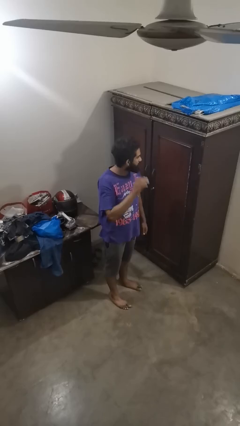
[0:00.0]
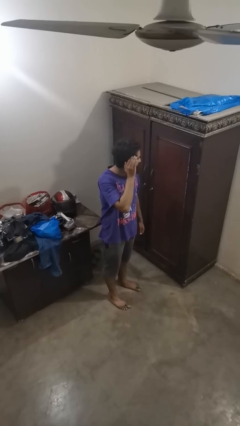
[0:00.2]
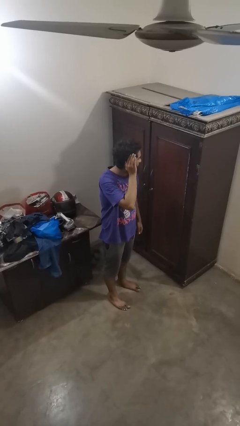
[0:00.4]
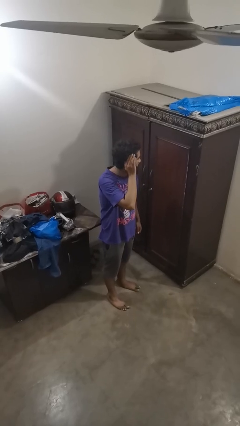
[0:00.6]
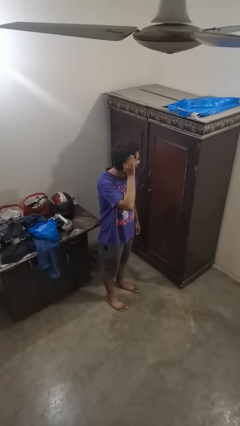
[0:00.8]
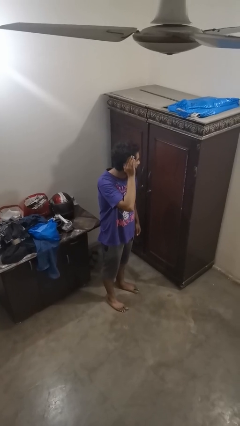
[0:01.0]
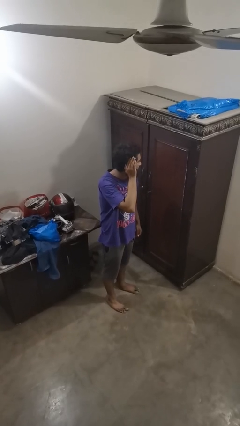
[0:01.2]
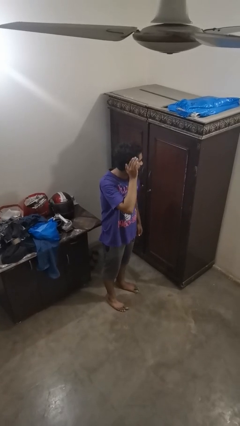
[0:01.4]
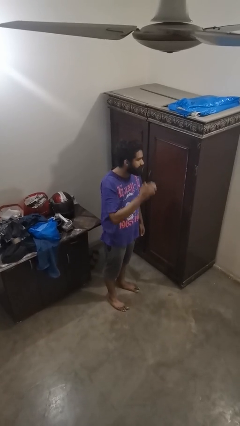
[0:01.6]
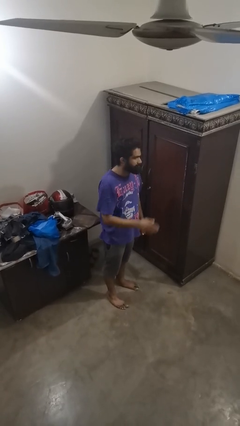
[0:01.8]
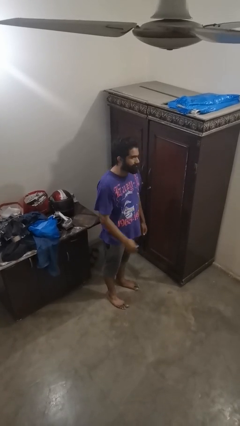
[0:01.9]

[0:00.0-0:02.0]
person gestures listen closely

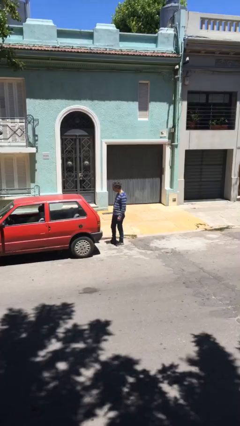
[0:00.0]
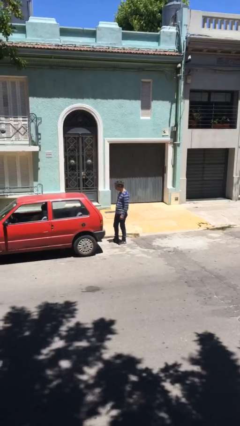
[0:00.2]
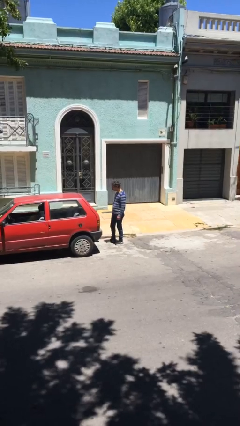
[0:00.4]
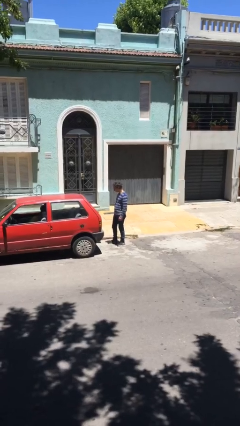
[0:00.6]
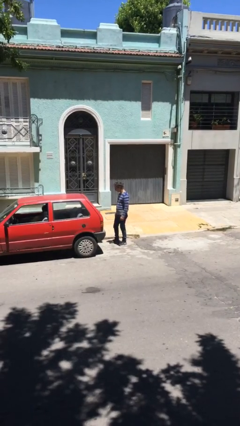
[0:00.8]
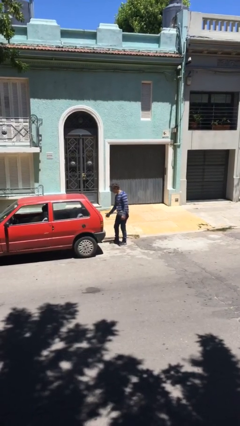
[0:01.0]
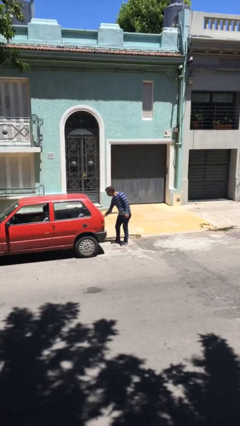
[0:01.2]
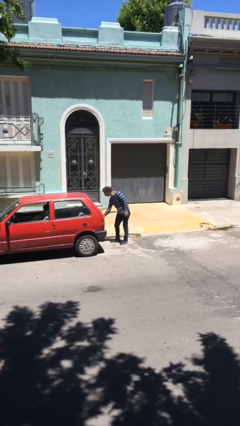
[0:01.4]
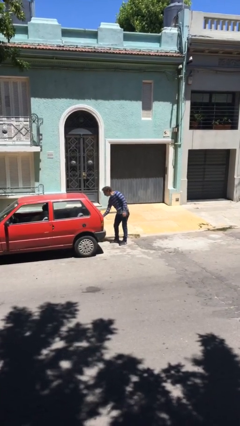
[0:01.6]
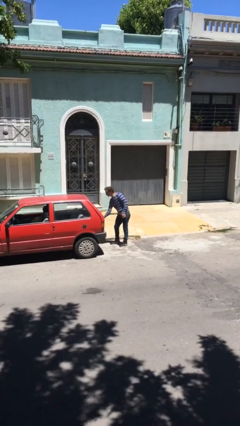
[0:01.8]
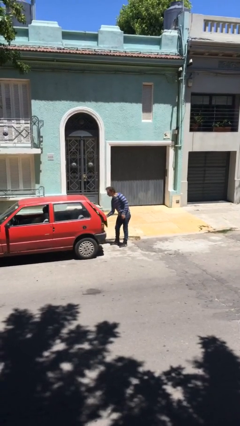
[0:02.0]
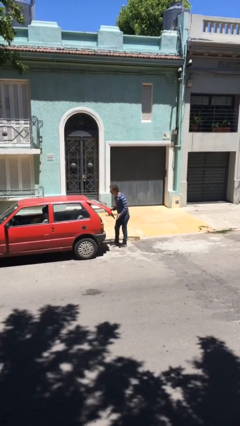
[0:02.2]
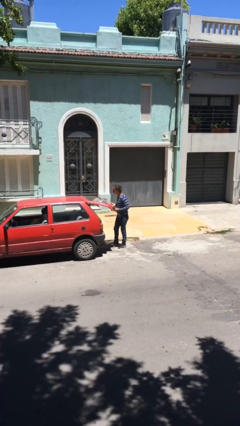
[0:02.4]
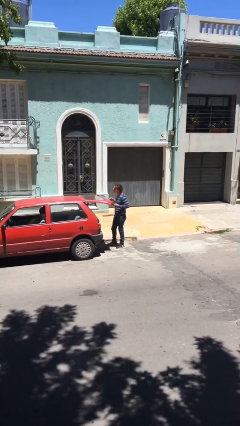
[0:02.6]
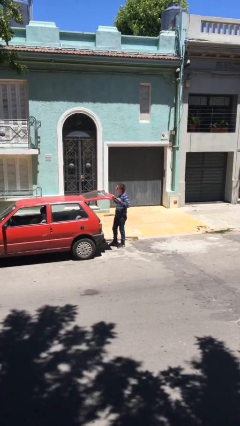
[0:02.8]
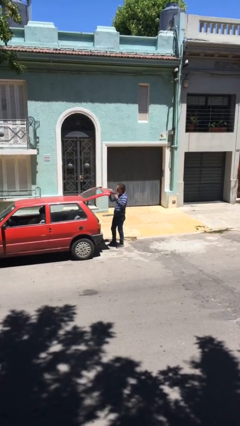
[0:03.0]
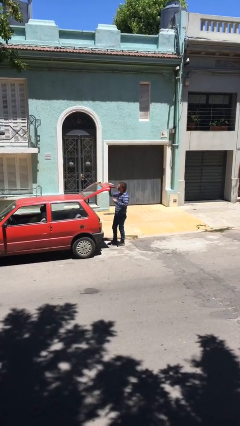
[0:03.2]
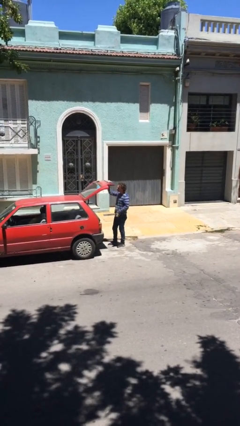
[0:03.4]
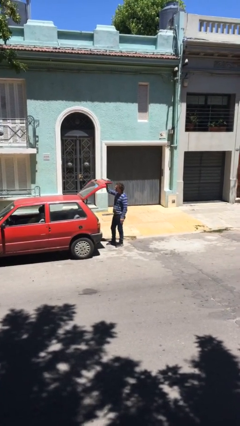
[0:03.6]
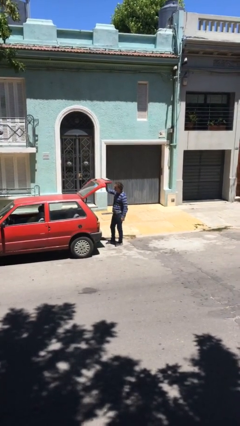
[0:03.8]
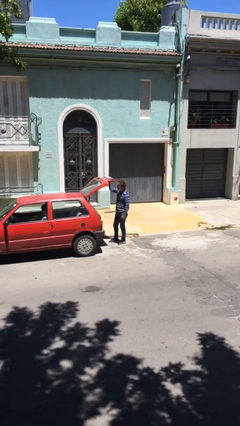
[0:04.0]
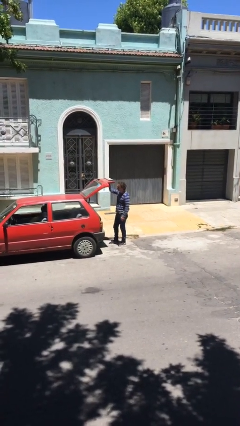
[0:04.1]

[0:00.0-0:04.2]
person opens car trunk

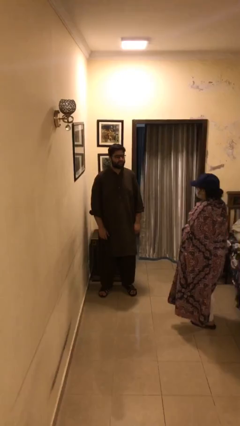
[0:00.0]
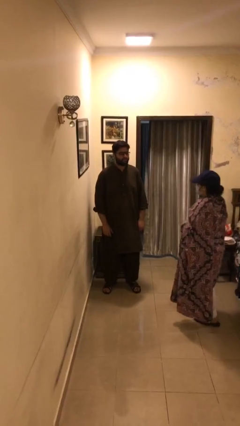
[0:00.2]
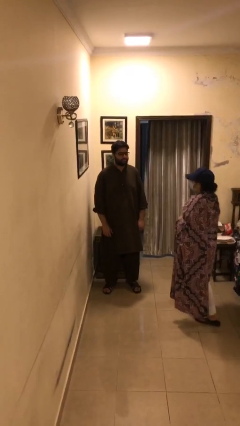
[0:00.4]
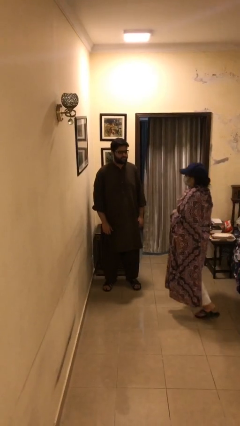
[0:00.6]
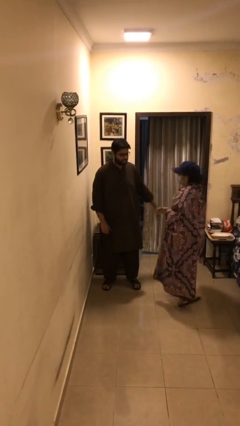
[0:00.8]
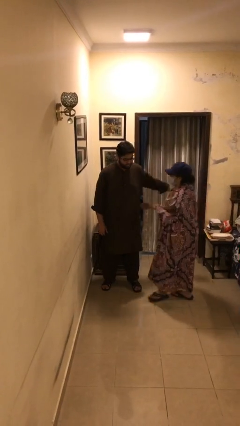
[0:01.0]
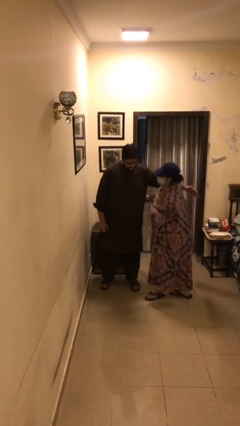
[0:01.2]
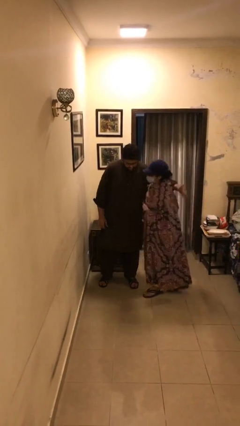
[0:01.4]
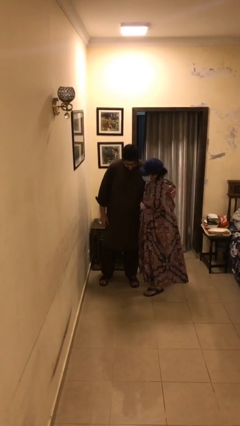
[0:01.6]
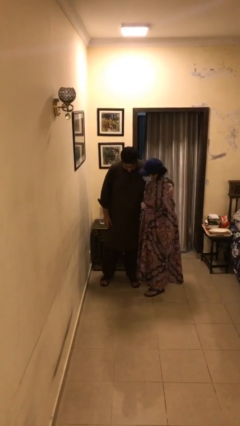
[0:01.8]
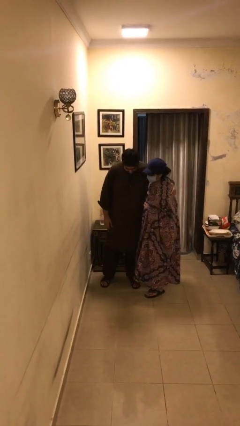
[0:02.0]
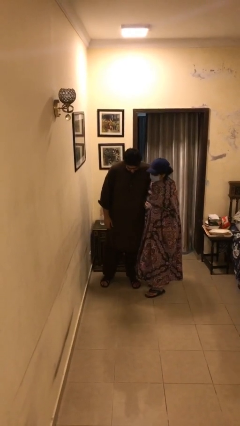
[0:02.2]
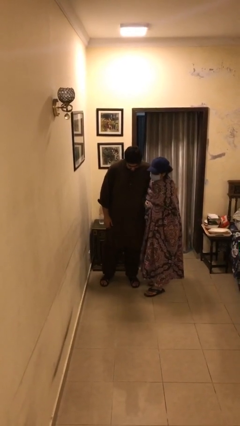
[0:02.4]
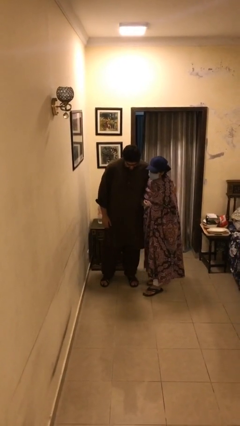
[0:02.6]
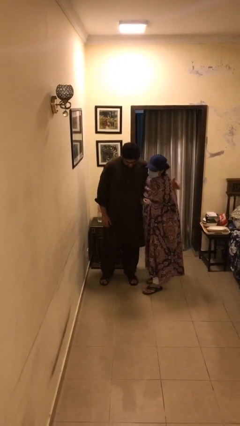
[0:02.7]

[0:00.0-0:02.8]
person embraces person

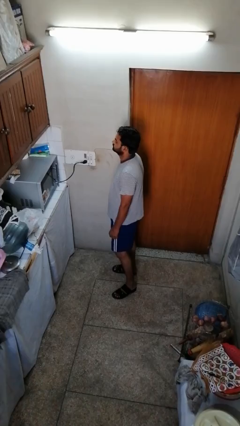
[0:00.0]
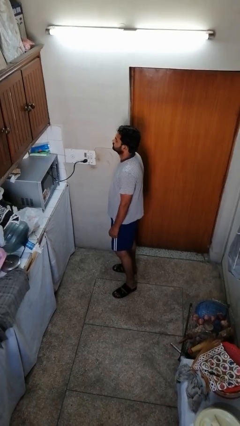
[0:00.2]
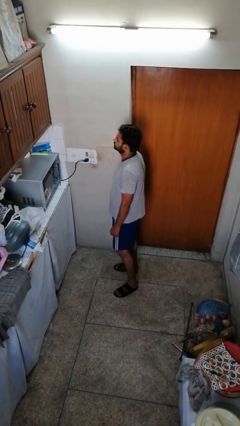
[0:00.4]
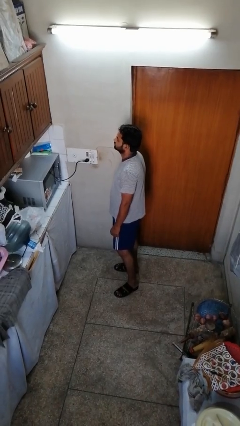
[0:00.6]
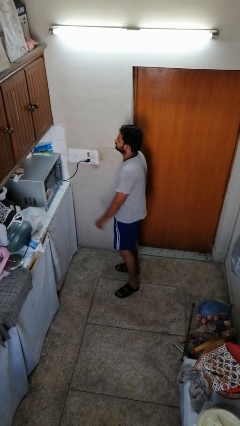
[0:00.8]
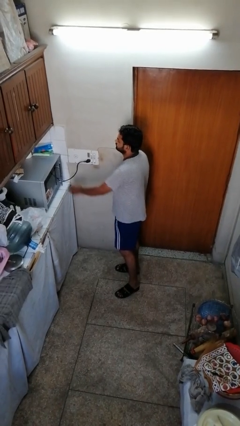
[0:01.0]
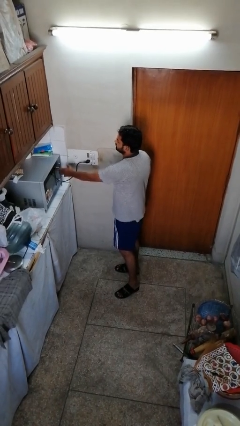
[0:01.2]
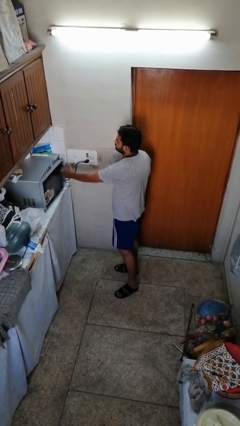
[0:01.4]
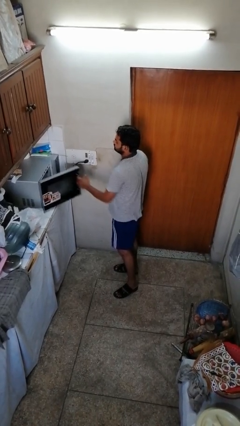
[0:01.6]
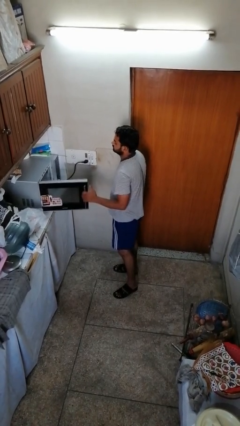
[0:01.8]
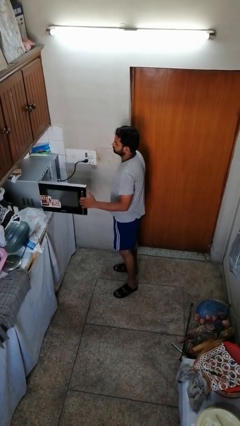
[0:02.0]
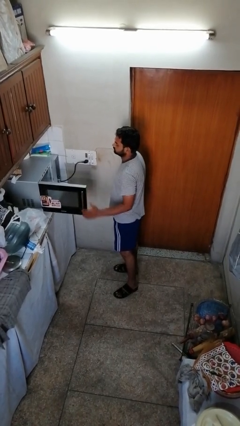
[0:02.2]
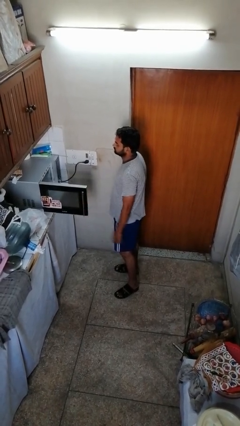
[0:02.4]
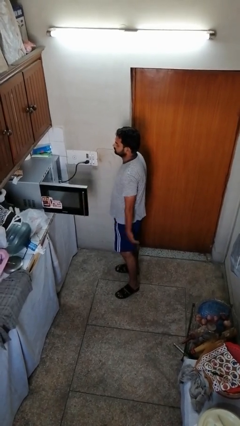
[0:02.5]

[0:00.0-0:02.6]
person opens oven door

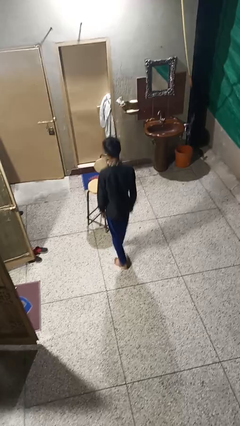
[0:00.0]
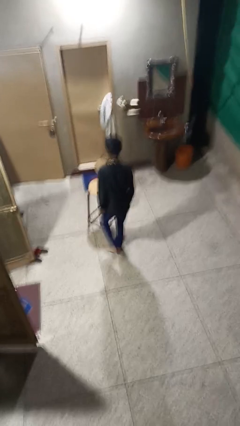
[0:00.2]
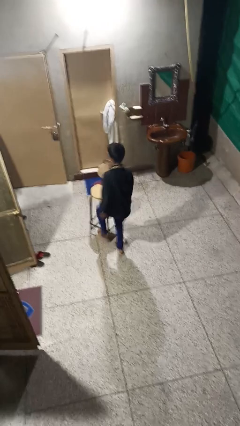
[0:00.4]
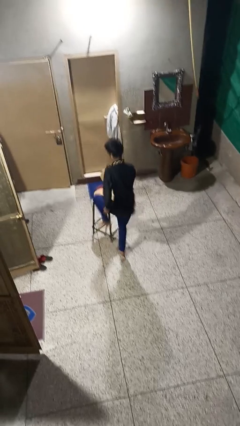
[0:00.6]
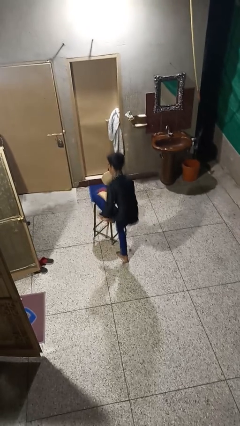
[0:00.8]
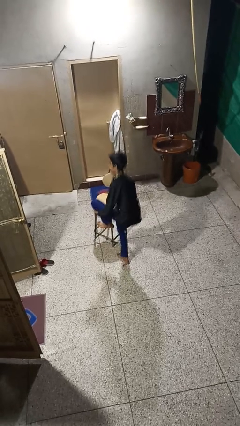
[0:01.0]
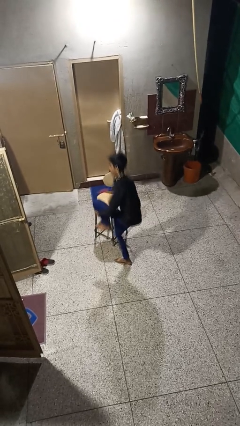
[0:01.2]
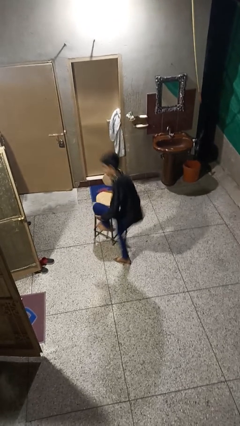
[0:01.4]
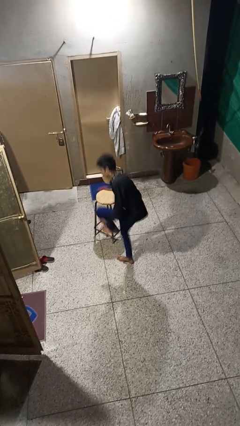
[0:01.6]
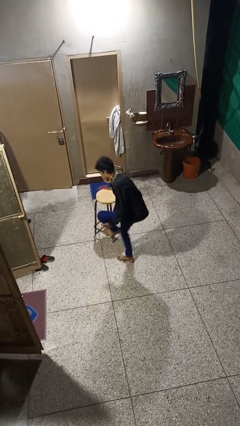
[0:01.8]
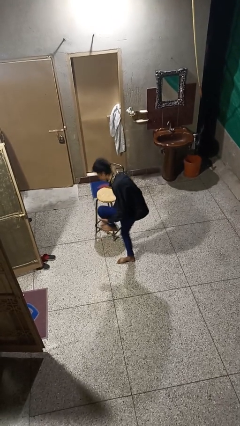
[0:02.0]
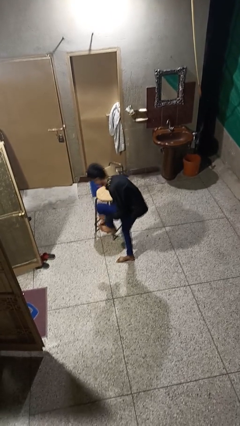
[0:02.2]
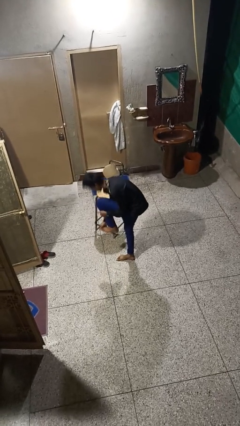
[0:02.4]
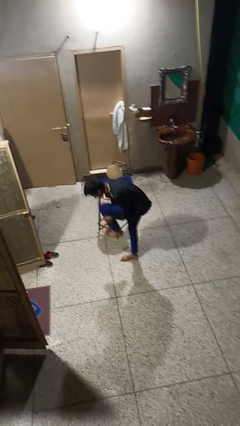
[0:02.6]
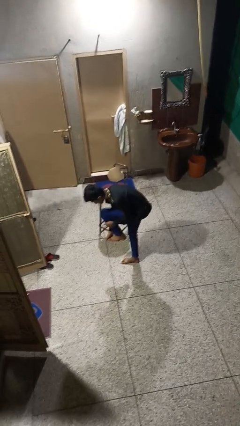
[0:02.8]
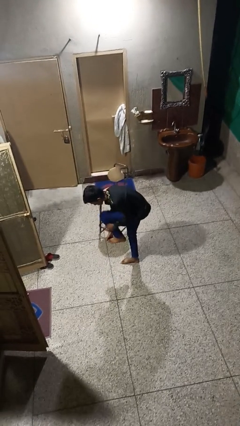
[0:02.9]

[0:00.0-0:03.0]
person stubs toe

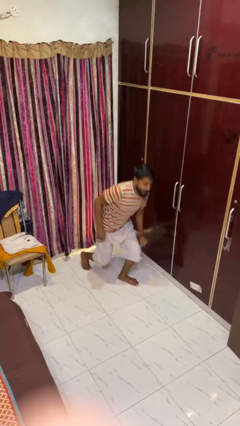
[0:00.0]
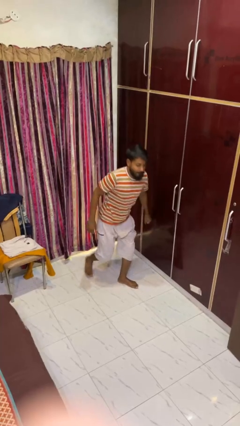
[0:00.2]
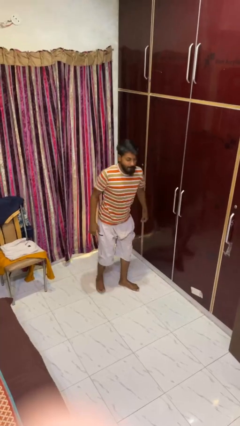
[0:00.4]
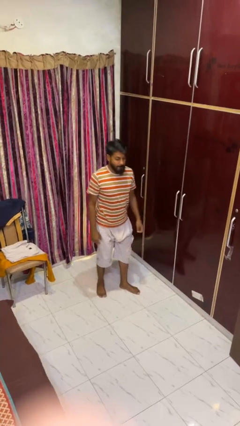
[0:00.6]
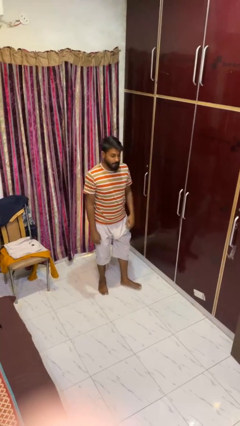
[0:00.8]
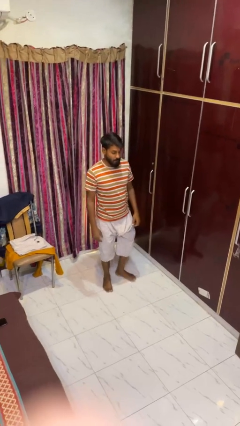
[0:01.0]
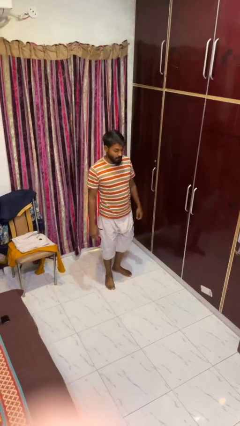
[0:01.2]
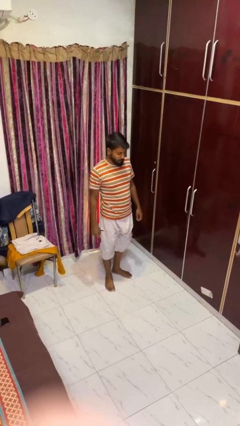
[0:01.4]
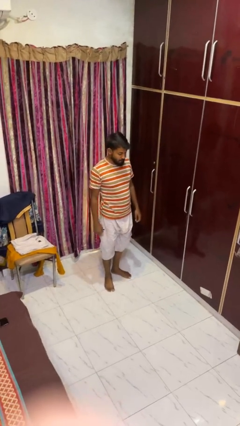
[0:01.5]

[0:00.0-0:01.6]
person stands up from floor

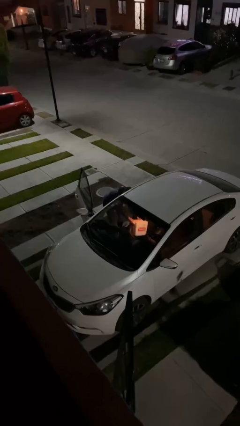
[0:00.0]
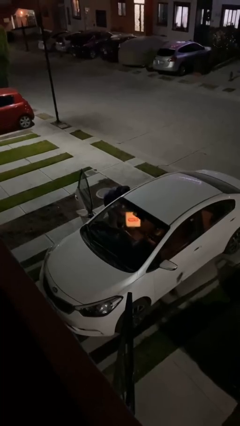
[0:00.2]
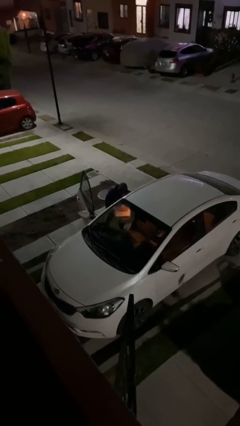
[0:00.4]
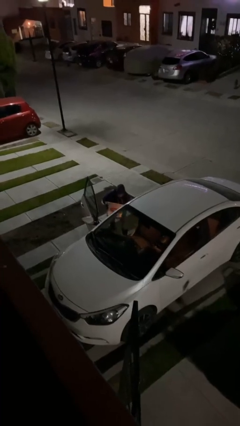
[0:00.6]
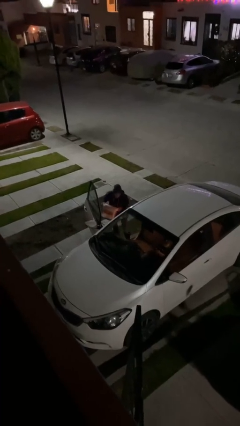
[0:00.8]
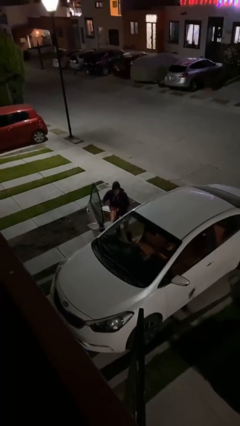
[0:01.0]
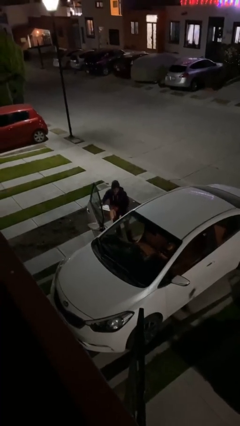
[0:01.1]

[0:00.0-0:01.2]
person unloads car
